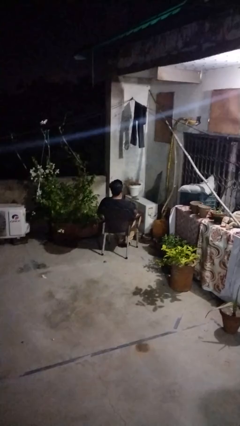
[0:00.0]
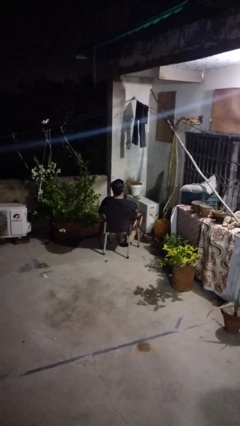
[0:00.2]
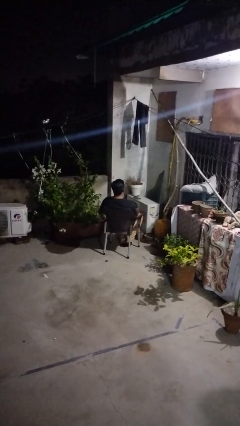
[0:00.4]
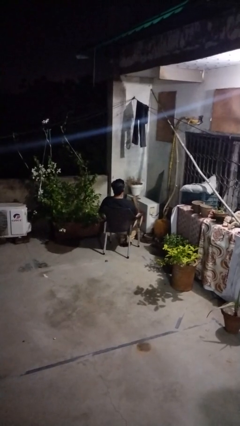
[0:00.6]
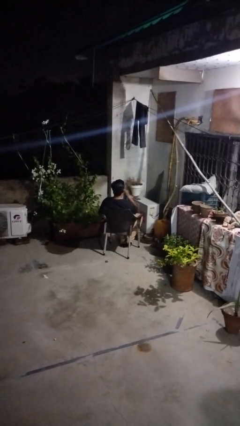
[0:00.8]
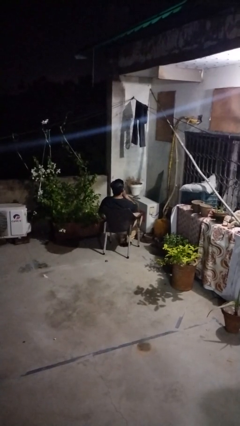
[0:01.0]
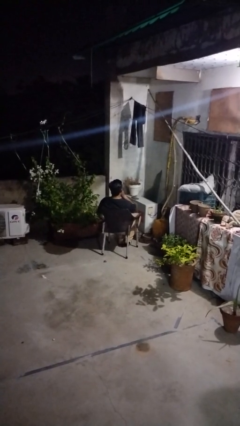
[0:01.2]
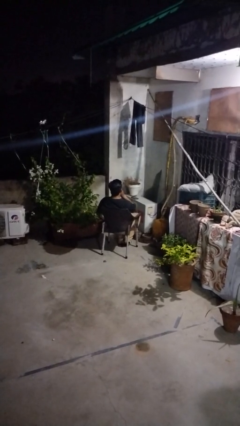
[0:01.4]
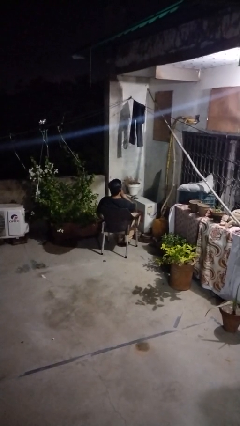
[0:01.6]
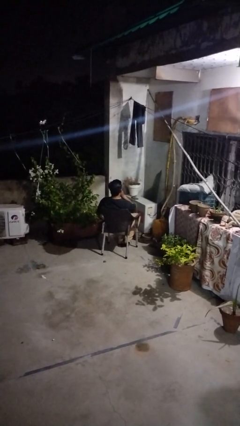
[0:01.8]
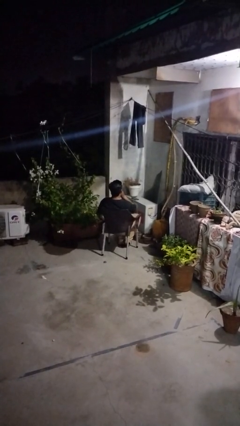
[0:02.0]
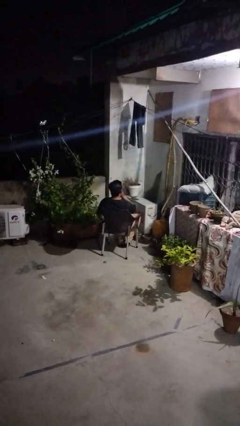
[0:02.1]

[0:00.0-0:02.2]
person gestures be quiet

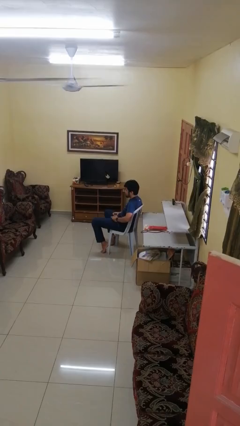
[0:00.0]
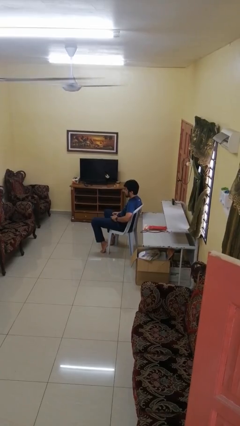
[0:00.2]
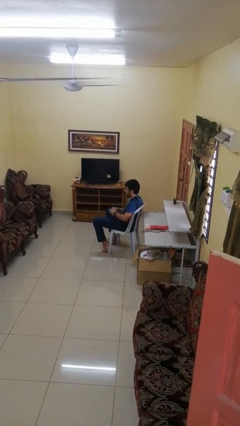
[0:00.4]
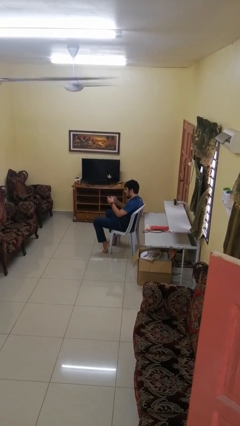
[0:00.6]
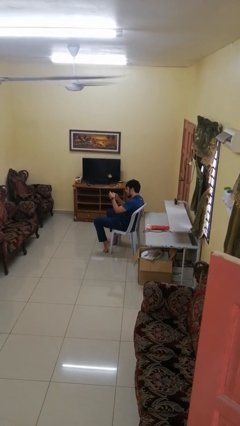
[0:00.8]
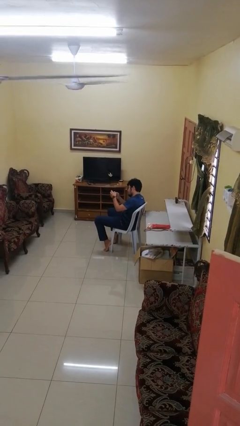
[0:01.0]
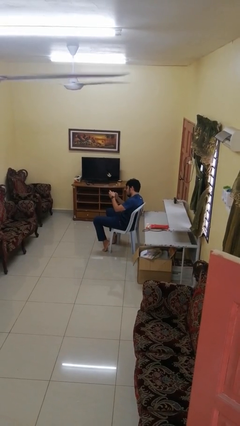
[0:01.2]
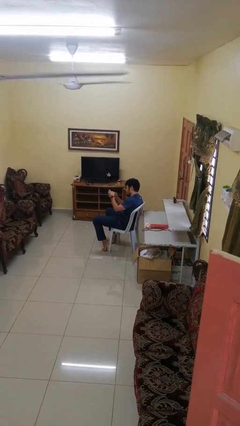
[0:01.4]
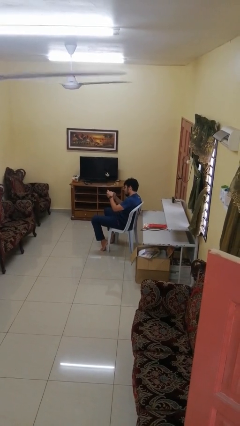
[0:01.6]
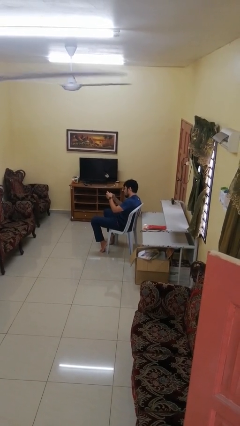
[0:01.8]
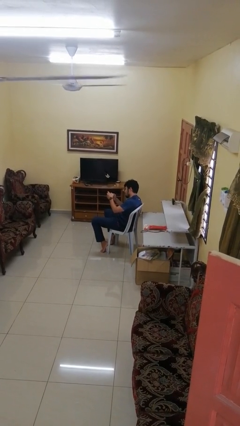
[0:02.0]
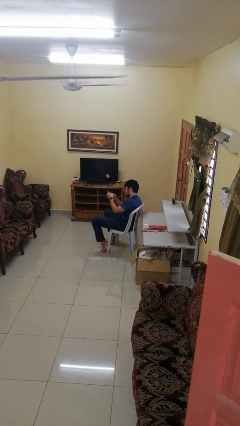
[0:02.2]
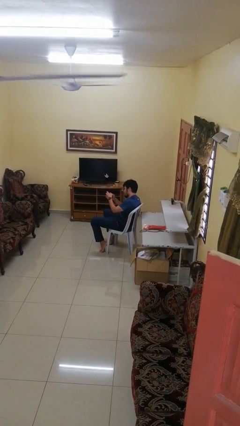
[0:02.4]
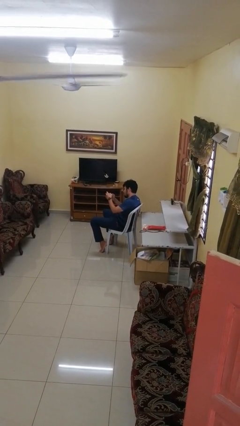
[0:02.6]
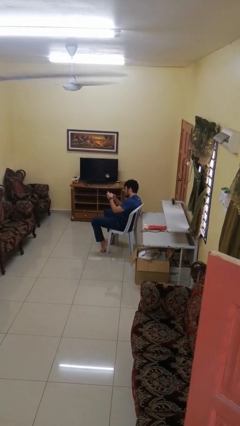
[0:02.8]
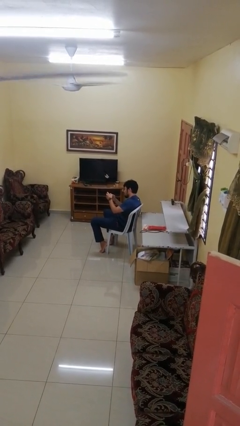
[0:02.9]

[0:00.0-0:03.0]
person interacts with handheld game

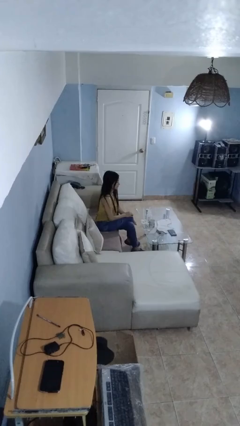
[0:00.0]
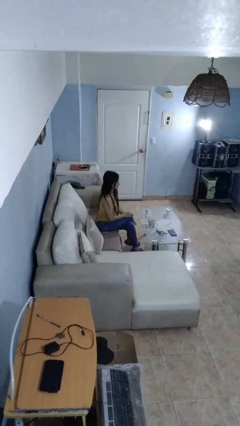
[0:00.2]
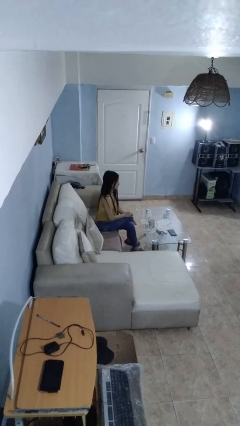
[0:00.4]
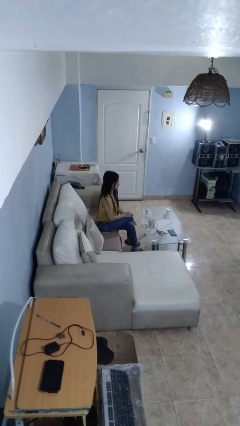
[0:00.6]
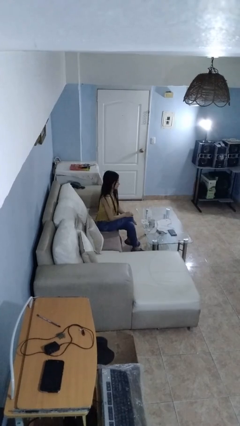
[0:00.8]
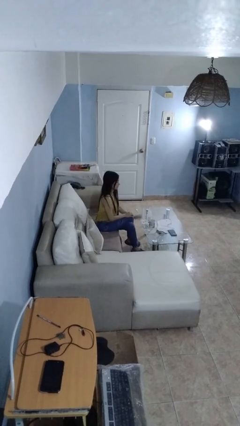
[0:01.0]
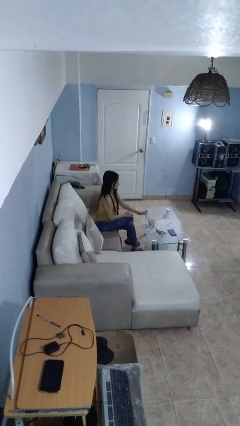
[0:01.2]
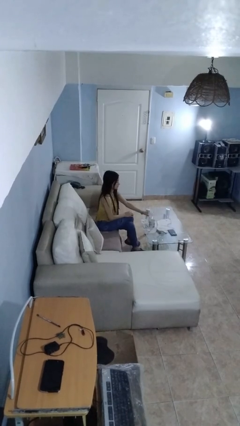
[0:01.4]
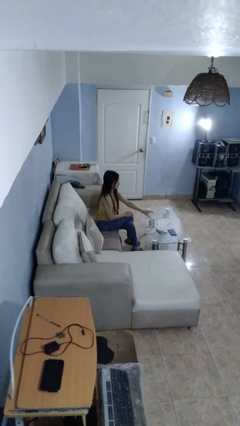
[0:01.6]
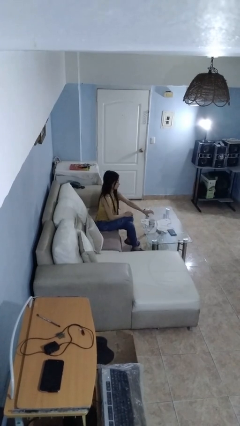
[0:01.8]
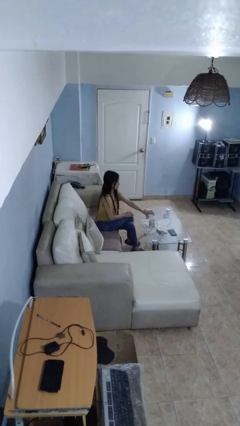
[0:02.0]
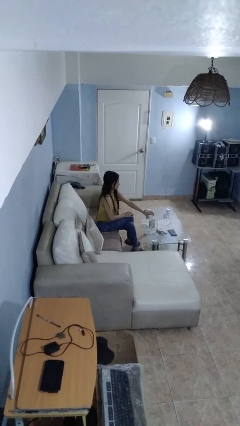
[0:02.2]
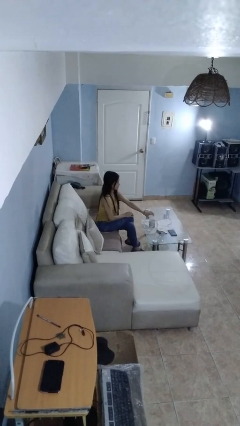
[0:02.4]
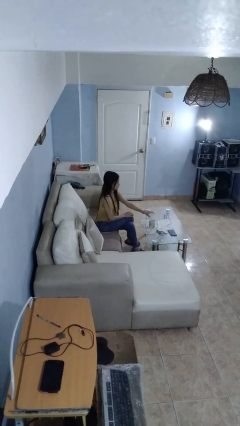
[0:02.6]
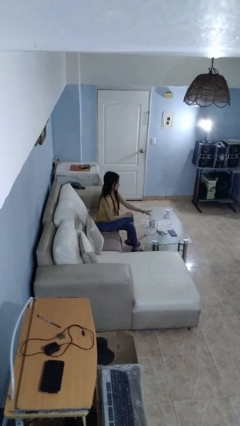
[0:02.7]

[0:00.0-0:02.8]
person pours liquid into cup

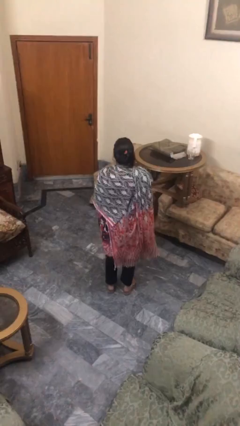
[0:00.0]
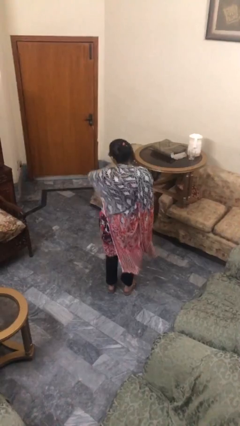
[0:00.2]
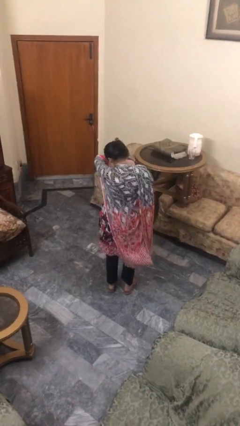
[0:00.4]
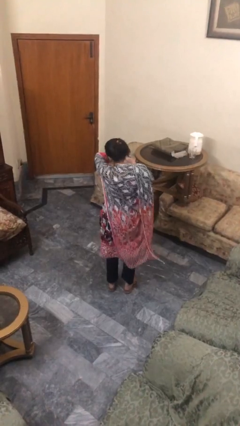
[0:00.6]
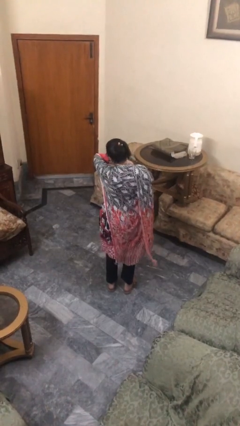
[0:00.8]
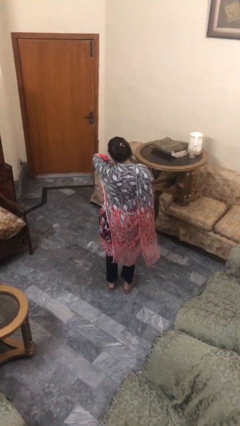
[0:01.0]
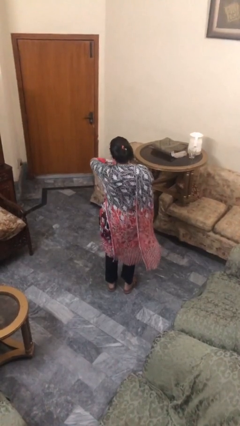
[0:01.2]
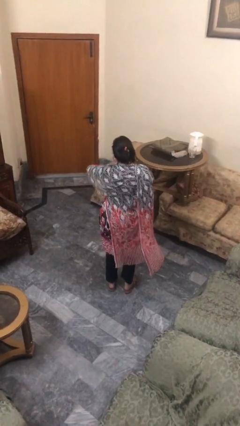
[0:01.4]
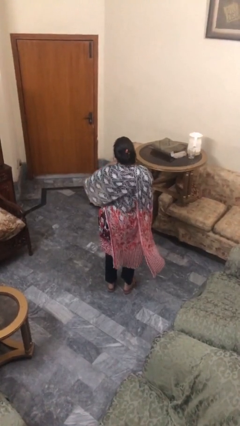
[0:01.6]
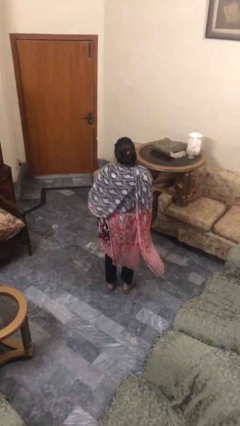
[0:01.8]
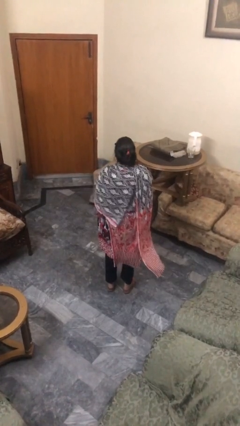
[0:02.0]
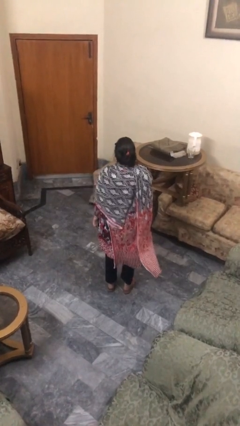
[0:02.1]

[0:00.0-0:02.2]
person sneezes into arm

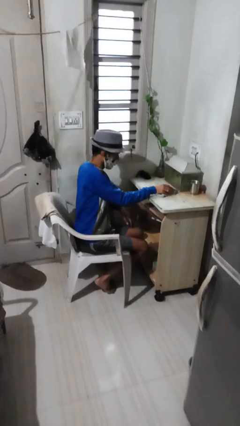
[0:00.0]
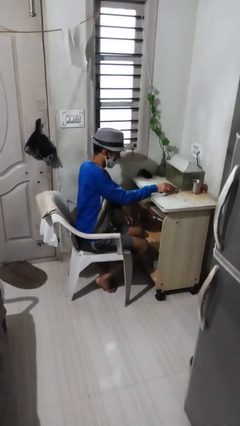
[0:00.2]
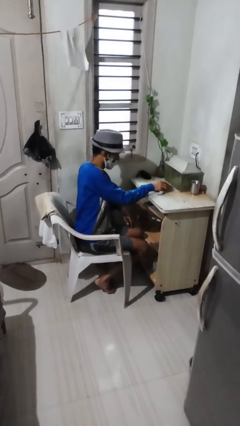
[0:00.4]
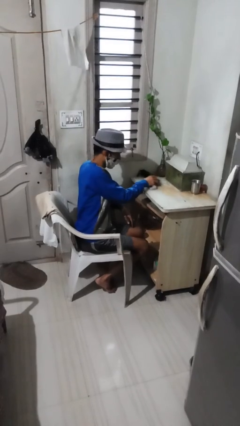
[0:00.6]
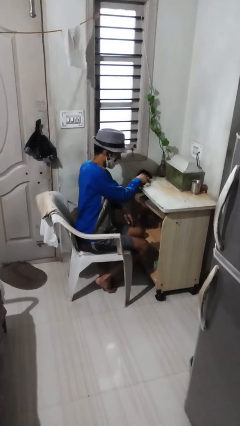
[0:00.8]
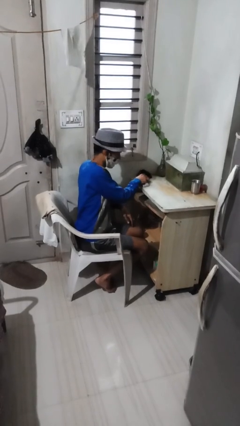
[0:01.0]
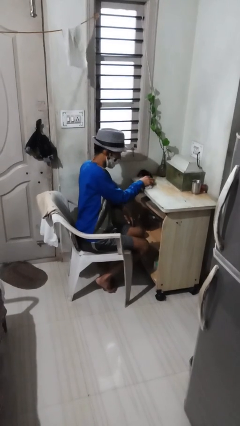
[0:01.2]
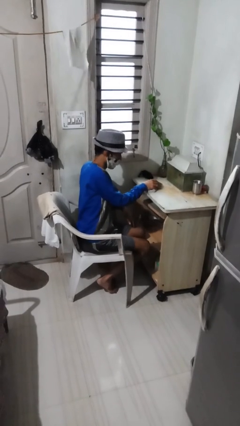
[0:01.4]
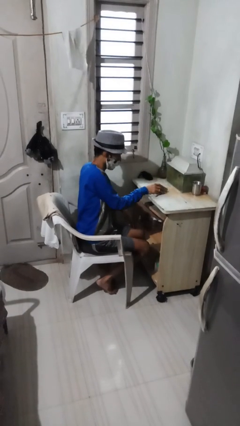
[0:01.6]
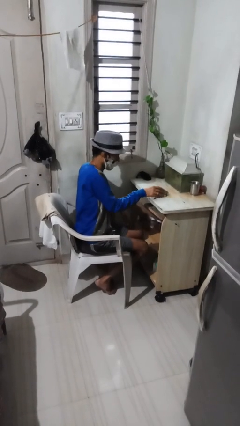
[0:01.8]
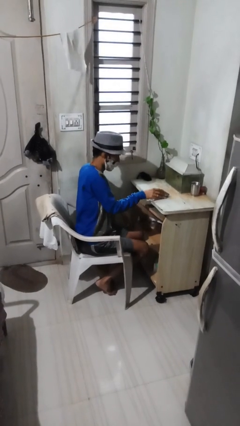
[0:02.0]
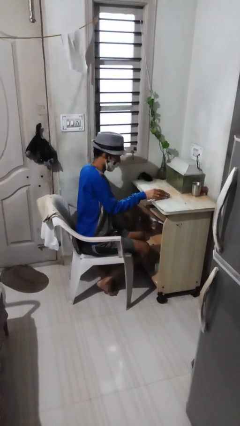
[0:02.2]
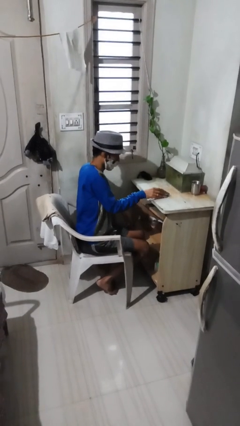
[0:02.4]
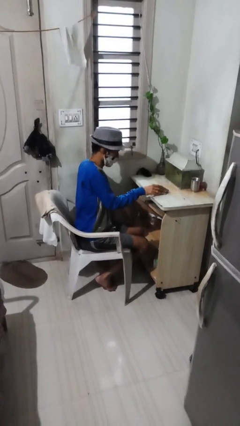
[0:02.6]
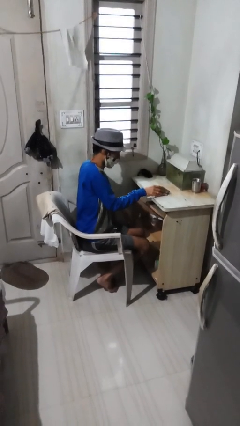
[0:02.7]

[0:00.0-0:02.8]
person cleans table with rag

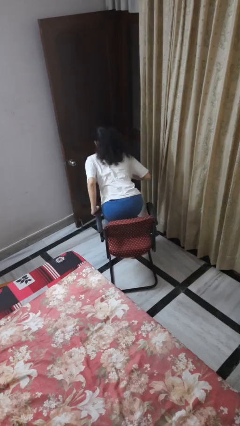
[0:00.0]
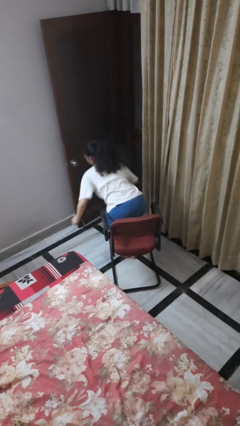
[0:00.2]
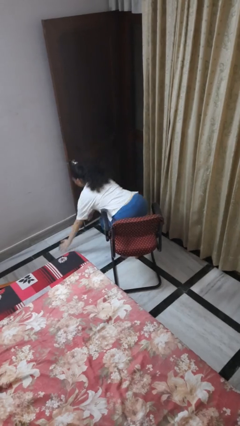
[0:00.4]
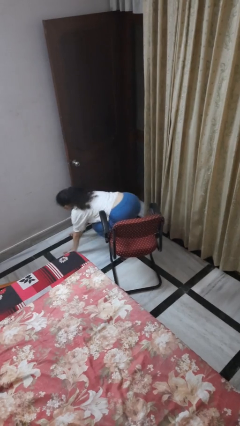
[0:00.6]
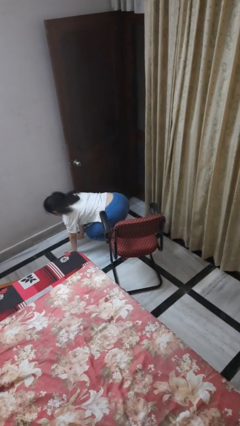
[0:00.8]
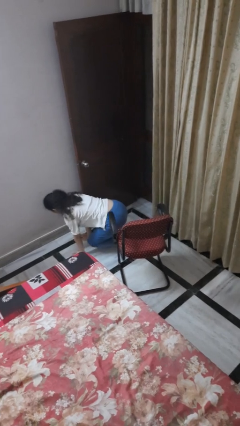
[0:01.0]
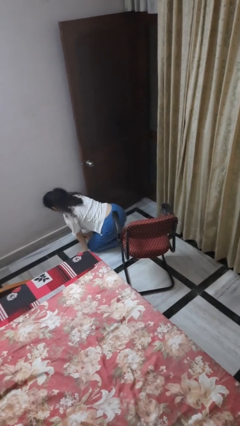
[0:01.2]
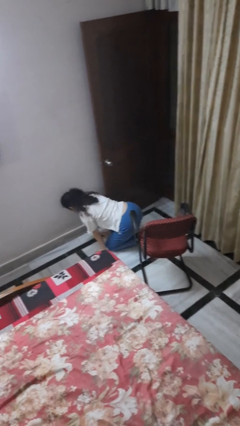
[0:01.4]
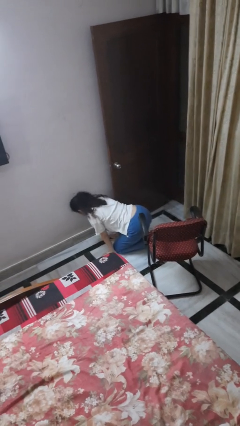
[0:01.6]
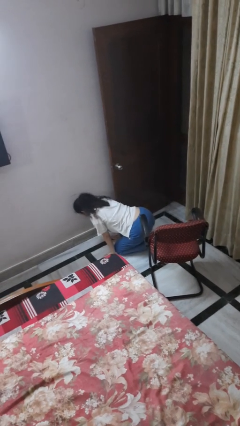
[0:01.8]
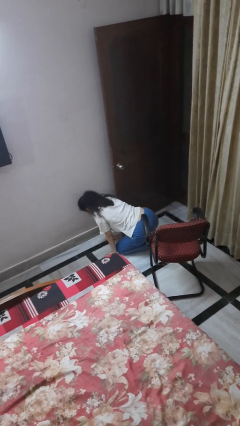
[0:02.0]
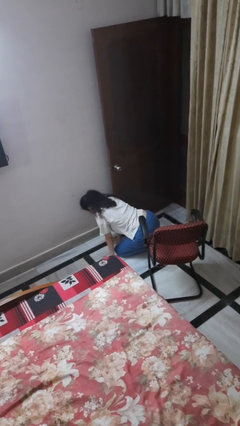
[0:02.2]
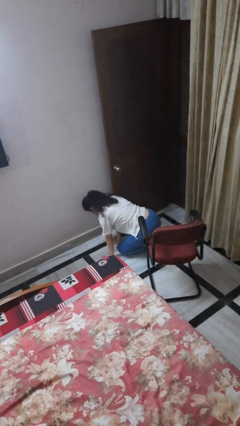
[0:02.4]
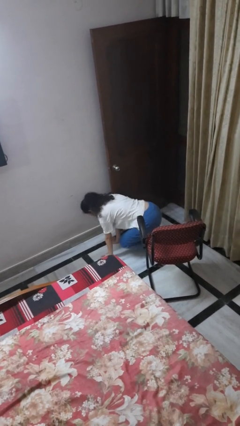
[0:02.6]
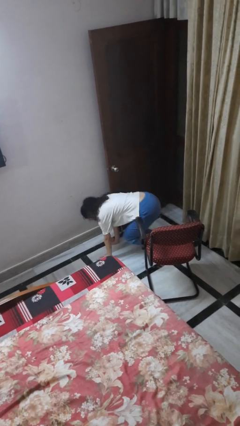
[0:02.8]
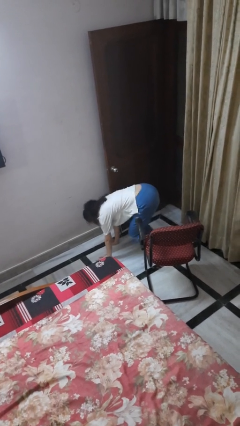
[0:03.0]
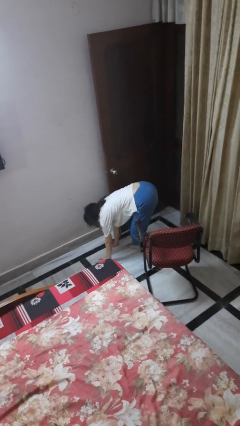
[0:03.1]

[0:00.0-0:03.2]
person falls from chair

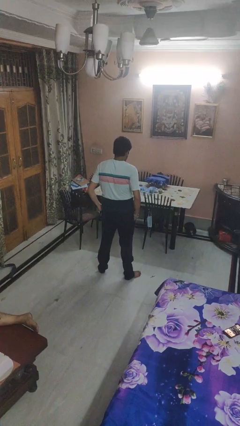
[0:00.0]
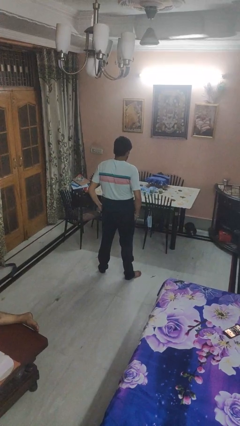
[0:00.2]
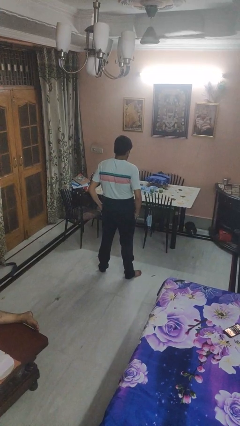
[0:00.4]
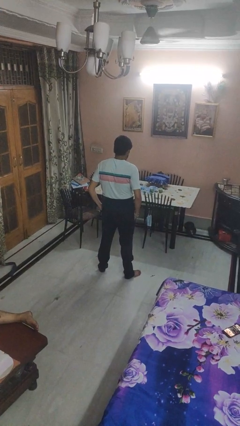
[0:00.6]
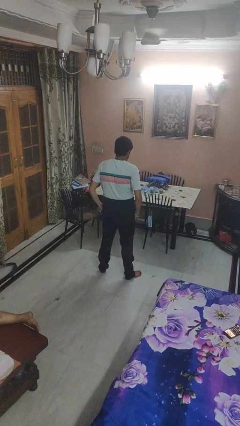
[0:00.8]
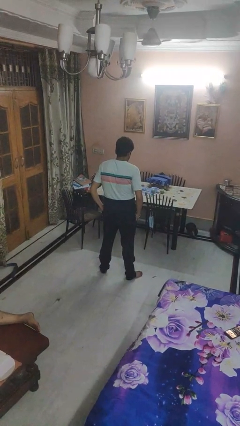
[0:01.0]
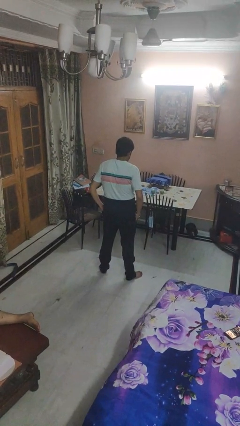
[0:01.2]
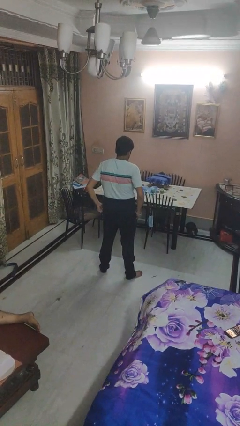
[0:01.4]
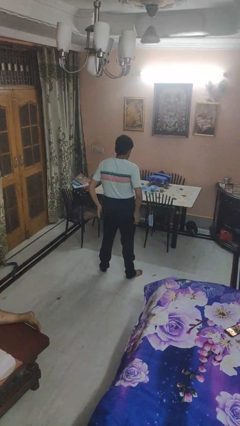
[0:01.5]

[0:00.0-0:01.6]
person puts hands in back pockets
